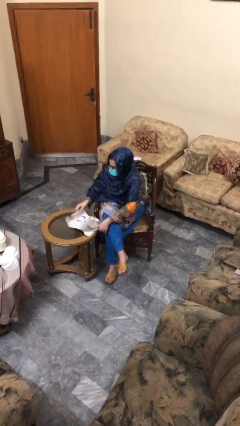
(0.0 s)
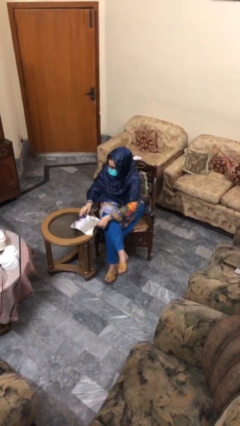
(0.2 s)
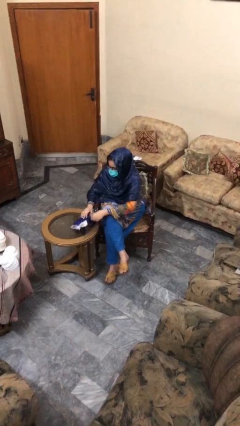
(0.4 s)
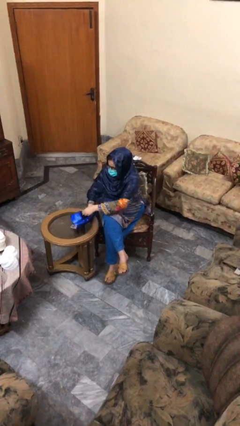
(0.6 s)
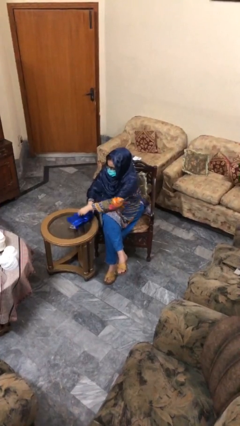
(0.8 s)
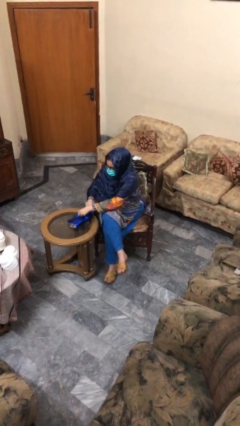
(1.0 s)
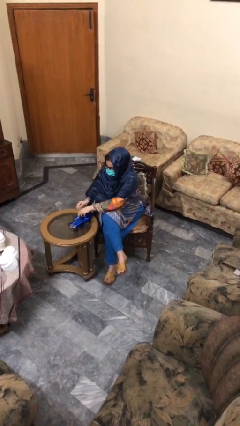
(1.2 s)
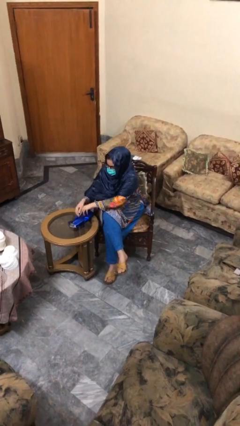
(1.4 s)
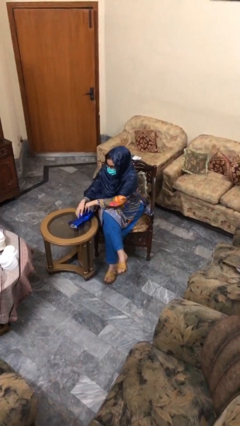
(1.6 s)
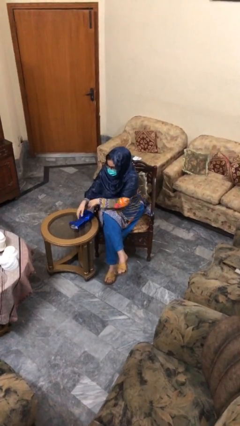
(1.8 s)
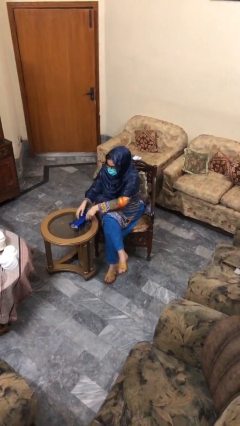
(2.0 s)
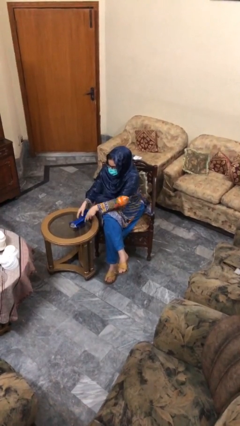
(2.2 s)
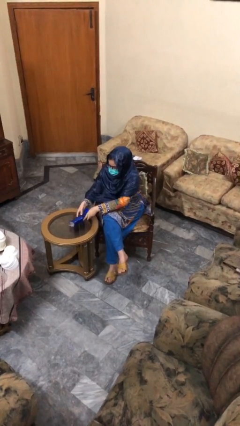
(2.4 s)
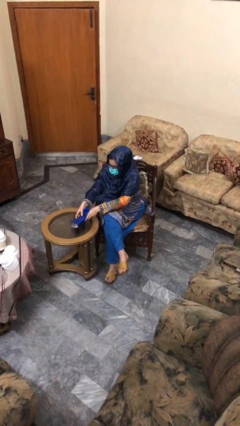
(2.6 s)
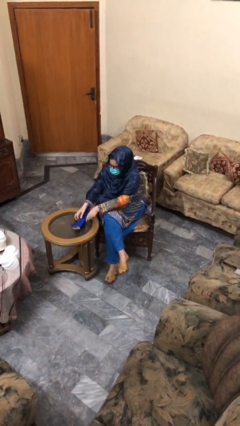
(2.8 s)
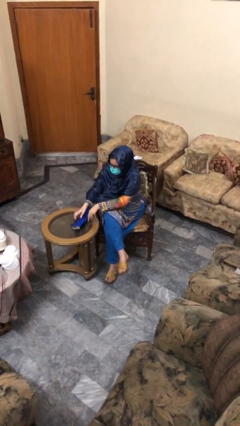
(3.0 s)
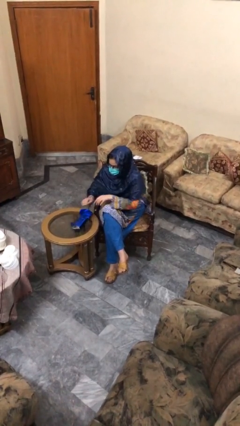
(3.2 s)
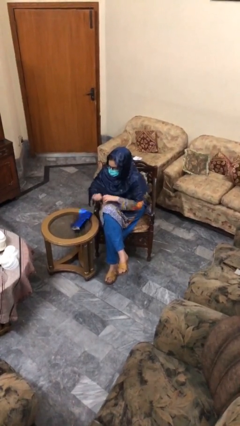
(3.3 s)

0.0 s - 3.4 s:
person wraps box

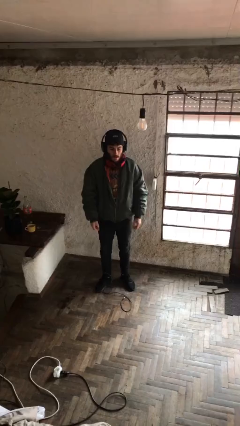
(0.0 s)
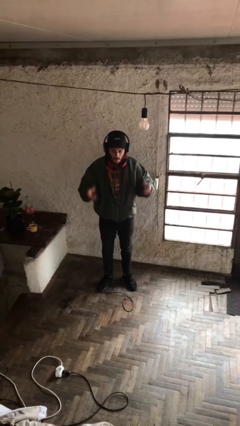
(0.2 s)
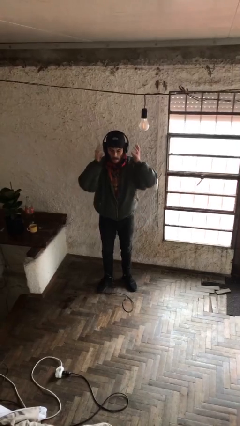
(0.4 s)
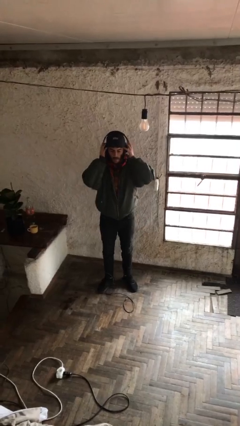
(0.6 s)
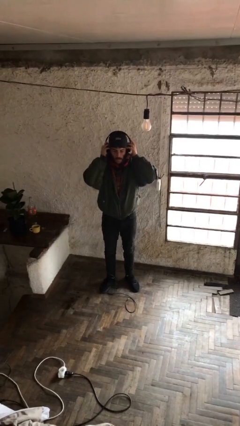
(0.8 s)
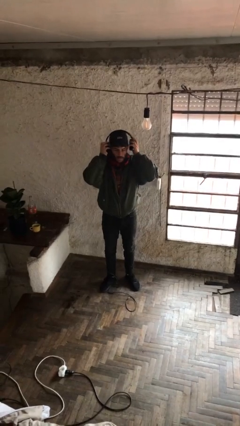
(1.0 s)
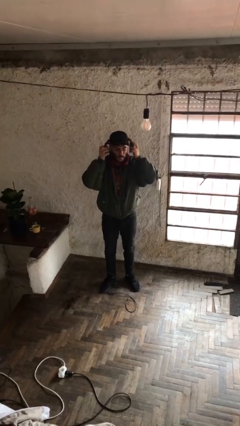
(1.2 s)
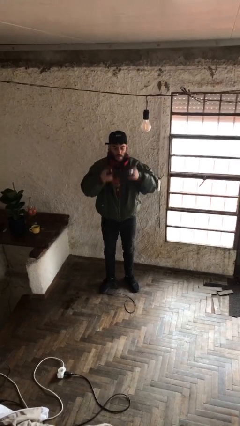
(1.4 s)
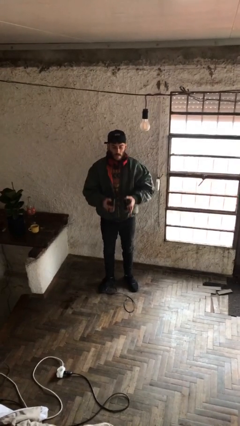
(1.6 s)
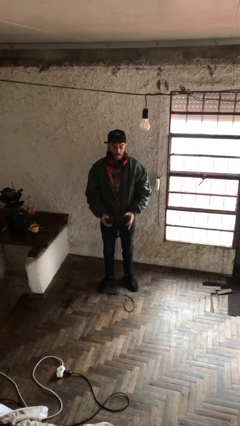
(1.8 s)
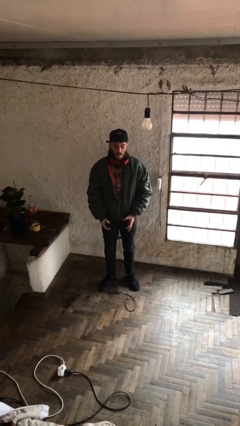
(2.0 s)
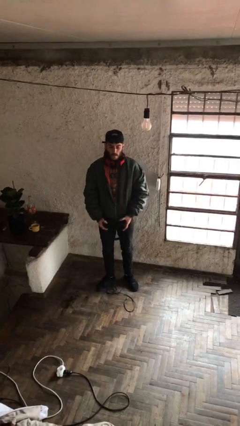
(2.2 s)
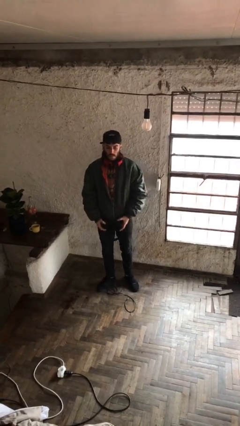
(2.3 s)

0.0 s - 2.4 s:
person takes off headphones

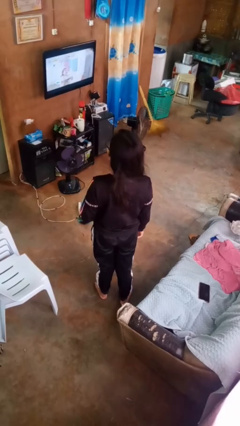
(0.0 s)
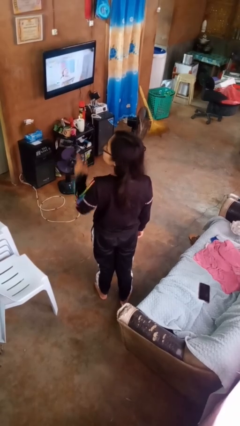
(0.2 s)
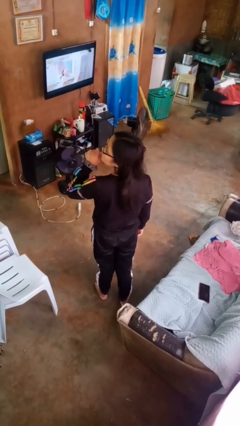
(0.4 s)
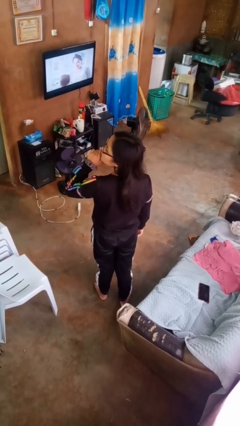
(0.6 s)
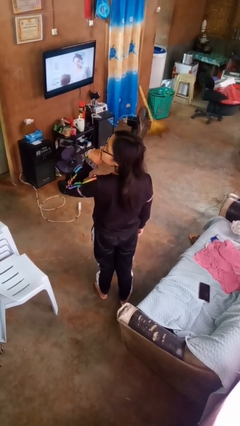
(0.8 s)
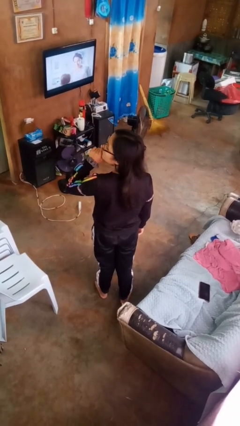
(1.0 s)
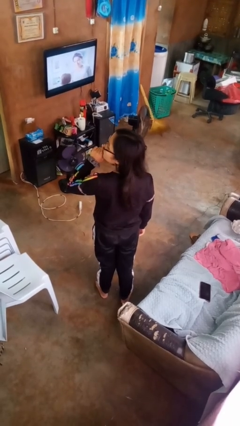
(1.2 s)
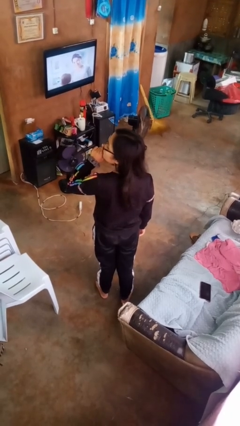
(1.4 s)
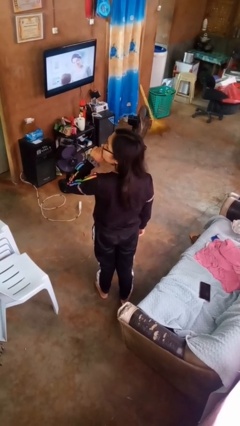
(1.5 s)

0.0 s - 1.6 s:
person gestures be quiet

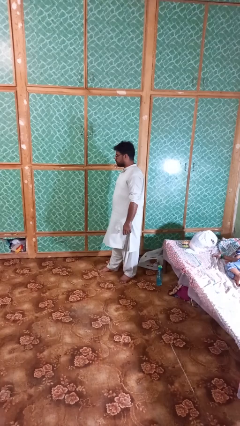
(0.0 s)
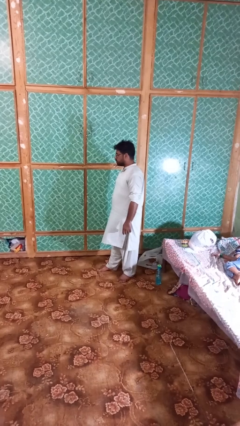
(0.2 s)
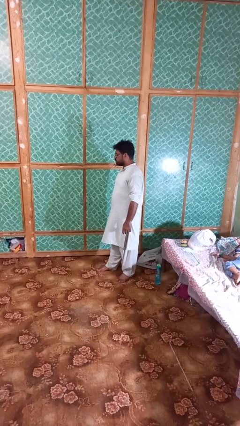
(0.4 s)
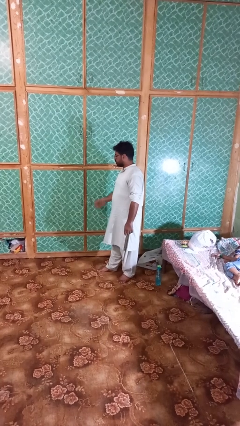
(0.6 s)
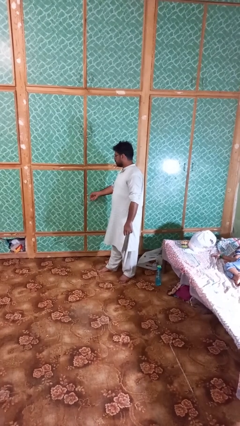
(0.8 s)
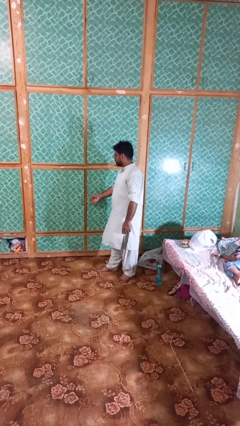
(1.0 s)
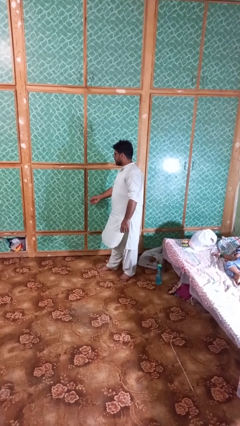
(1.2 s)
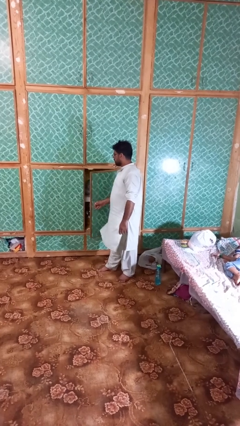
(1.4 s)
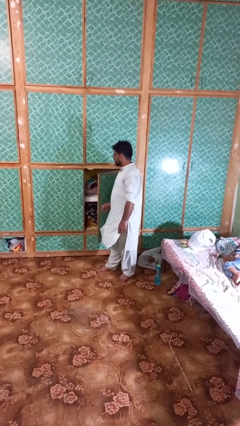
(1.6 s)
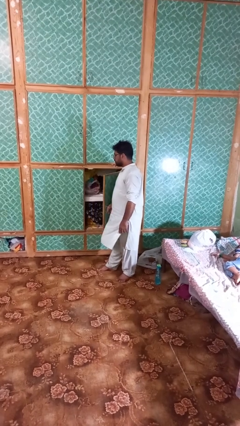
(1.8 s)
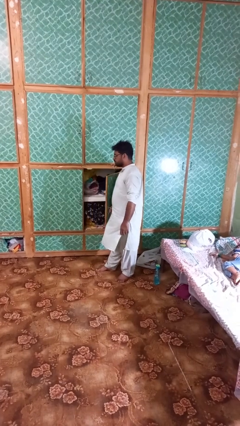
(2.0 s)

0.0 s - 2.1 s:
person opens closet door

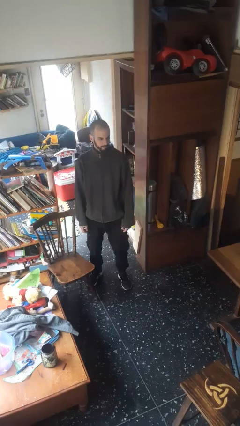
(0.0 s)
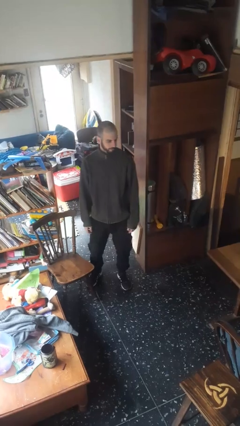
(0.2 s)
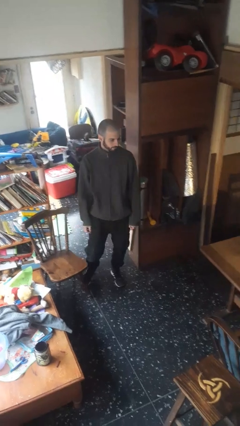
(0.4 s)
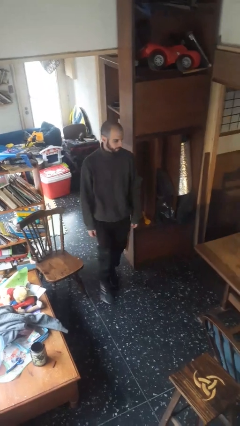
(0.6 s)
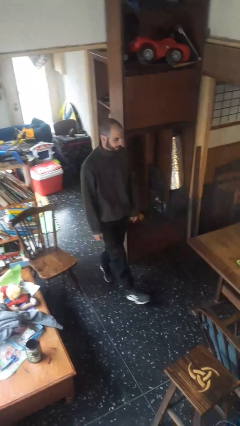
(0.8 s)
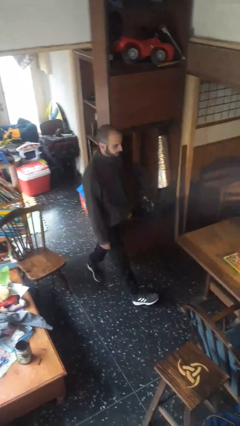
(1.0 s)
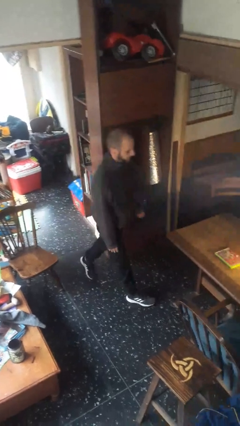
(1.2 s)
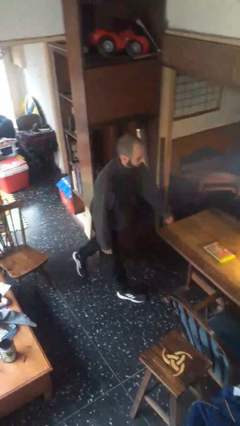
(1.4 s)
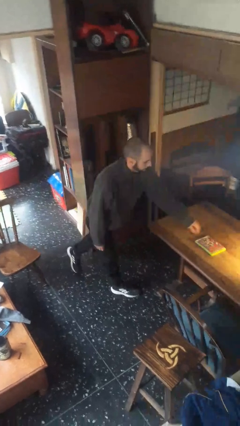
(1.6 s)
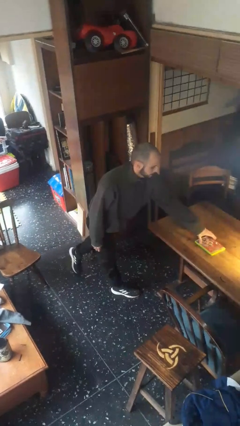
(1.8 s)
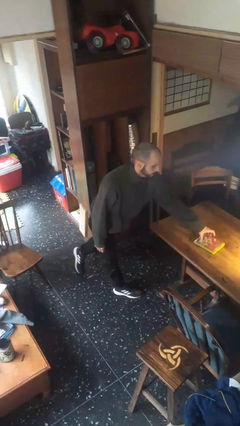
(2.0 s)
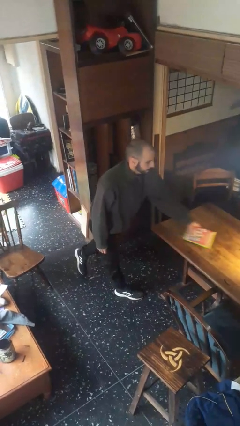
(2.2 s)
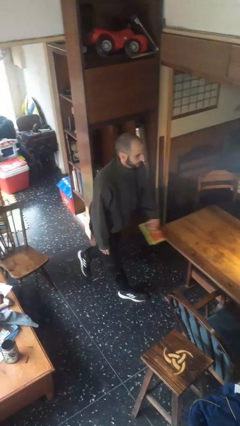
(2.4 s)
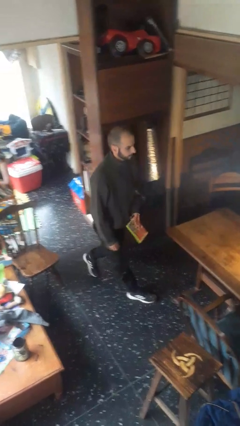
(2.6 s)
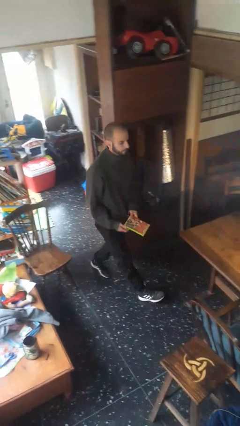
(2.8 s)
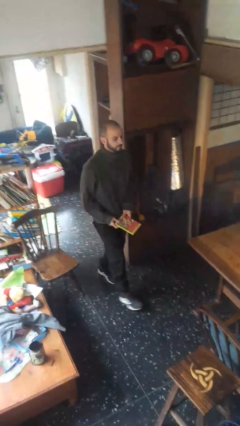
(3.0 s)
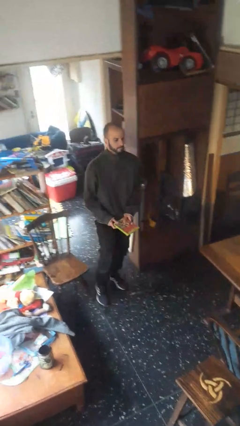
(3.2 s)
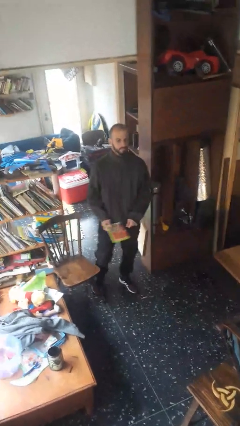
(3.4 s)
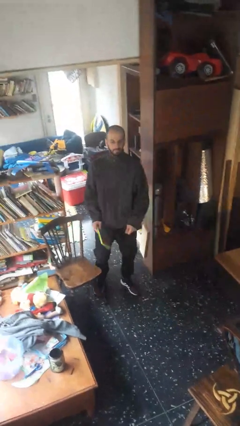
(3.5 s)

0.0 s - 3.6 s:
person picks up object from table

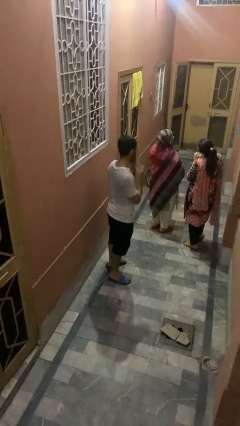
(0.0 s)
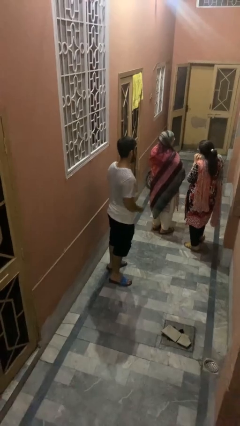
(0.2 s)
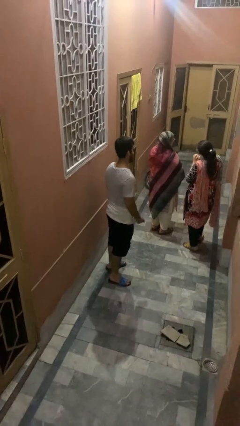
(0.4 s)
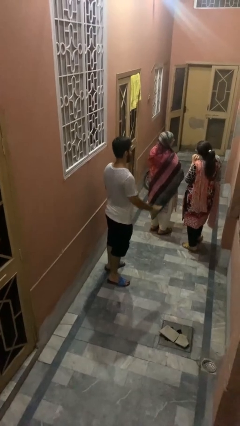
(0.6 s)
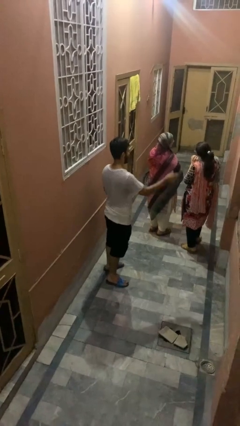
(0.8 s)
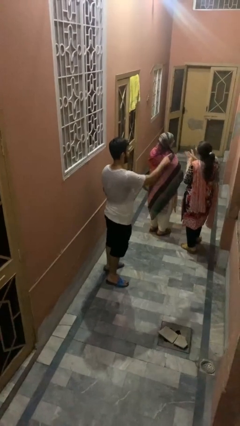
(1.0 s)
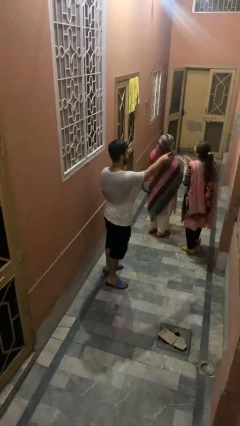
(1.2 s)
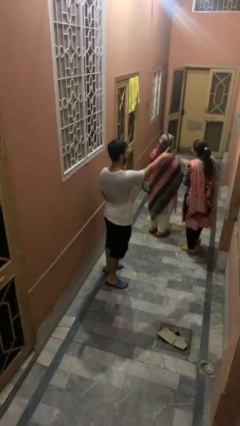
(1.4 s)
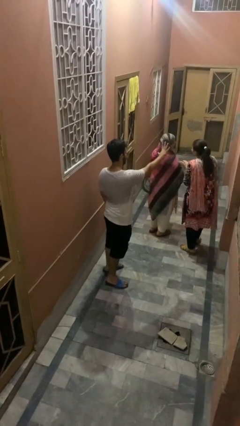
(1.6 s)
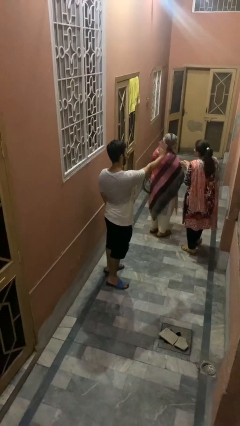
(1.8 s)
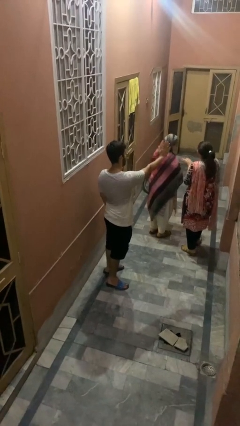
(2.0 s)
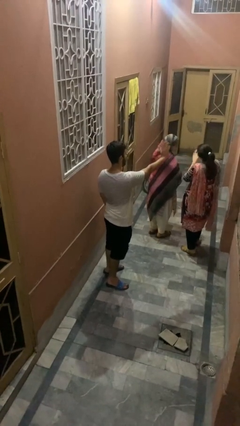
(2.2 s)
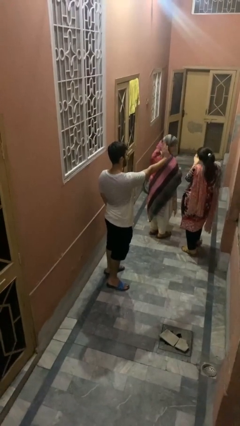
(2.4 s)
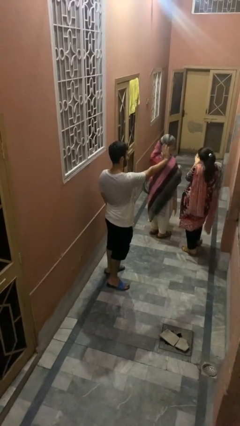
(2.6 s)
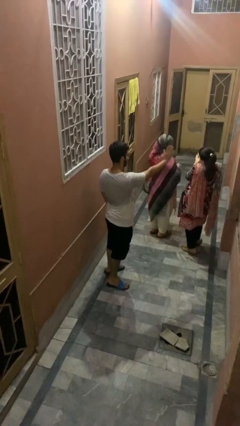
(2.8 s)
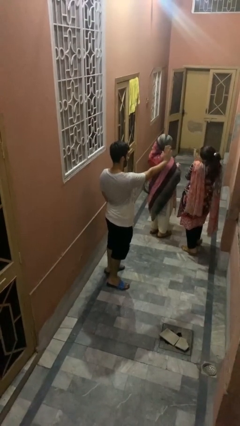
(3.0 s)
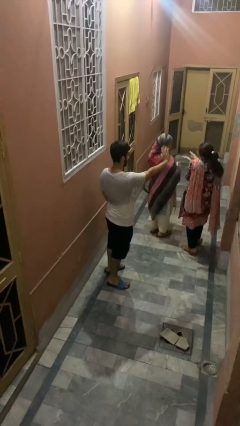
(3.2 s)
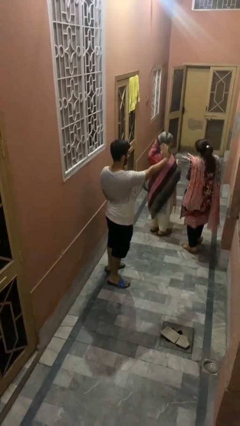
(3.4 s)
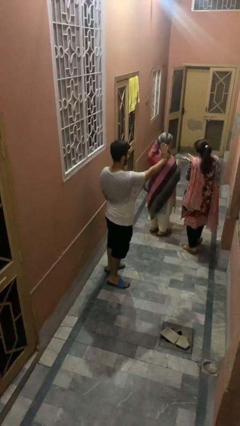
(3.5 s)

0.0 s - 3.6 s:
person waves at person

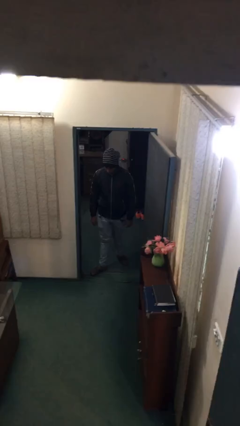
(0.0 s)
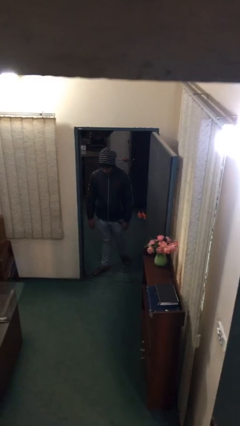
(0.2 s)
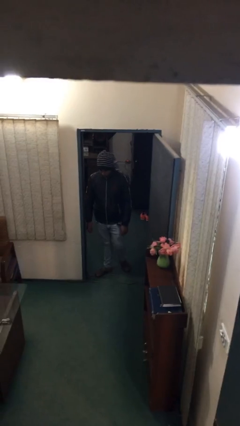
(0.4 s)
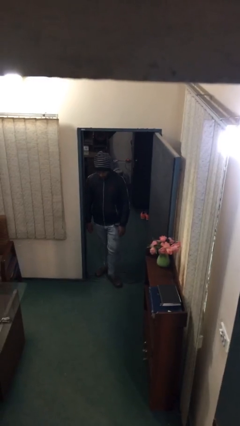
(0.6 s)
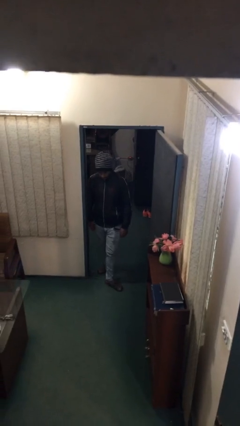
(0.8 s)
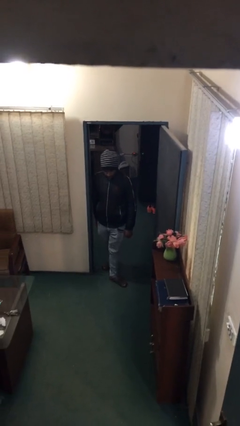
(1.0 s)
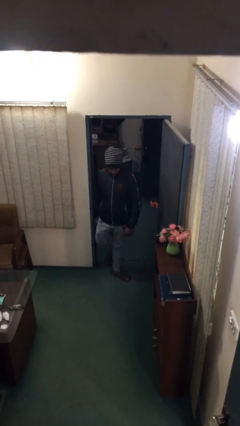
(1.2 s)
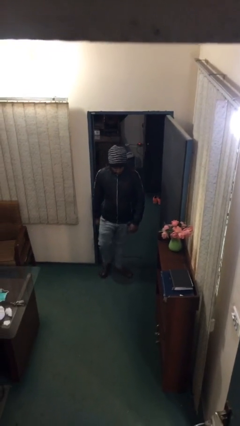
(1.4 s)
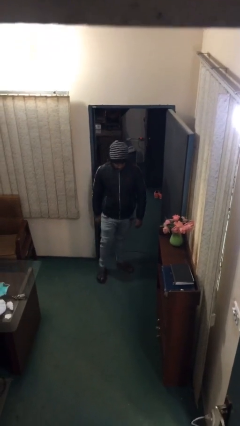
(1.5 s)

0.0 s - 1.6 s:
person enters scene through structure
